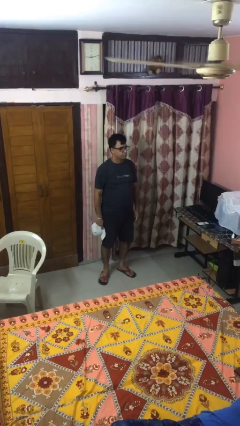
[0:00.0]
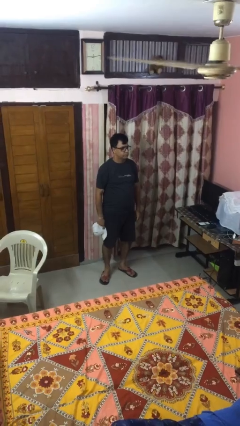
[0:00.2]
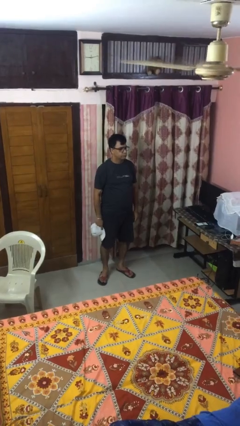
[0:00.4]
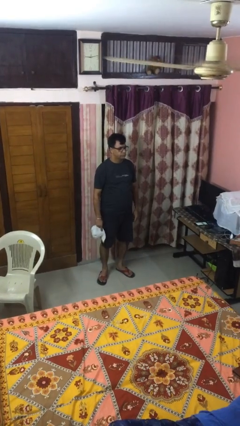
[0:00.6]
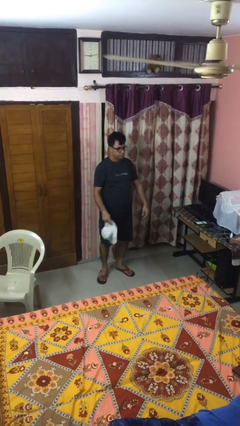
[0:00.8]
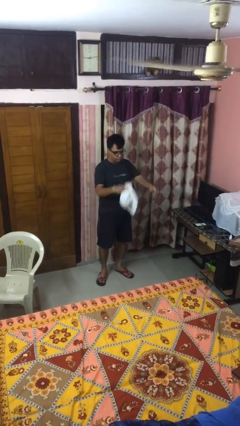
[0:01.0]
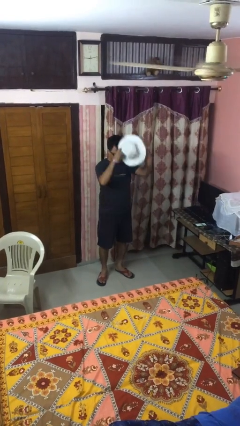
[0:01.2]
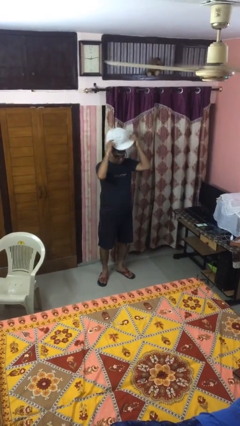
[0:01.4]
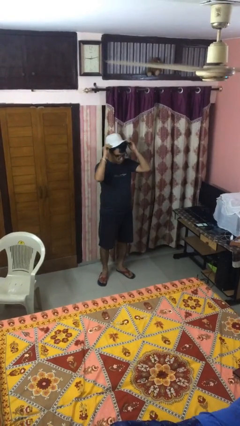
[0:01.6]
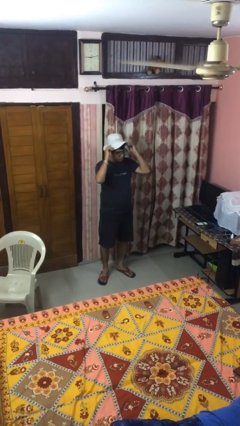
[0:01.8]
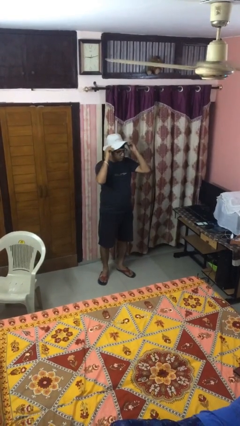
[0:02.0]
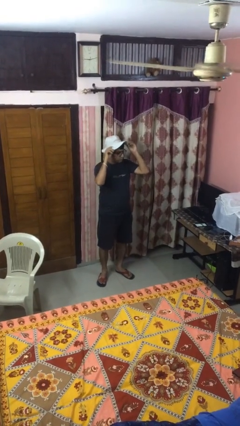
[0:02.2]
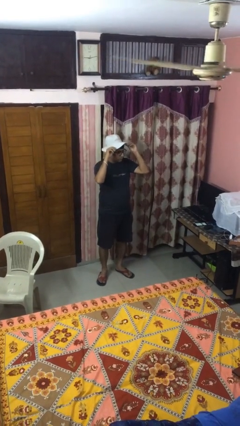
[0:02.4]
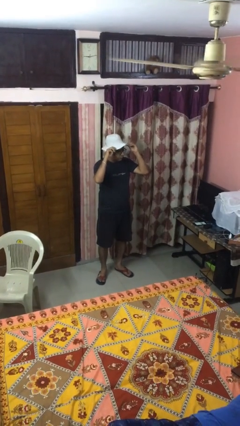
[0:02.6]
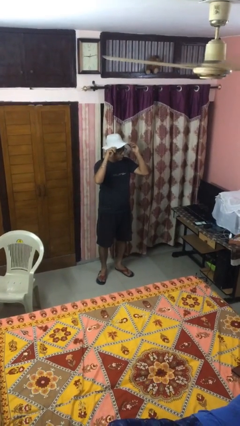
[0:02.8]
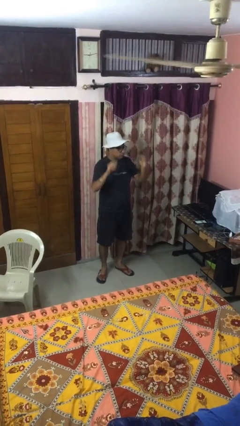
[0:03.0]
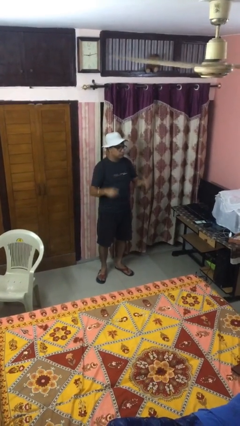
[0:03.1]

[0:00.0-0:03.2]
person puts on hat

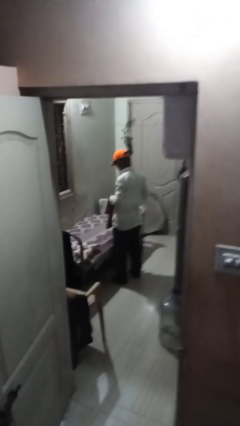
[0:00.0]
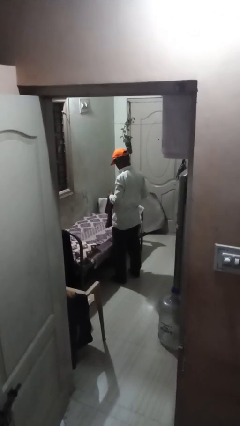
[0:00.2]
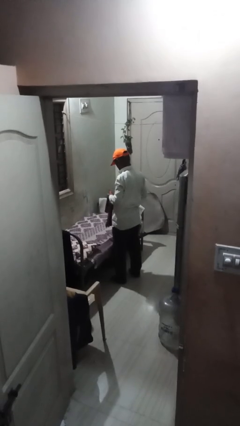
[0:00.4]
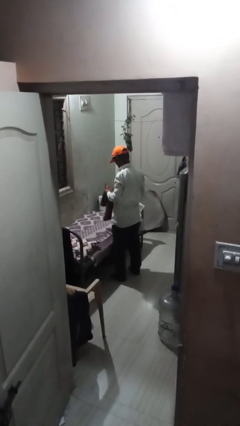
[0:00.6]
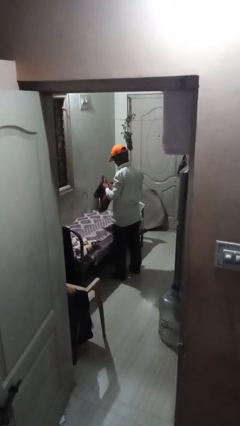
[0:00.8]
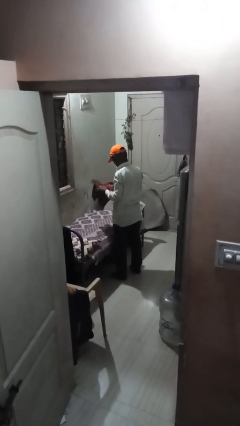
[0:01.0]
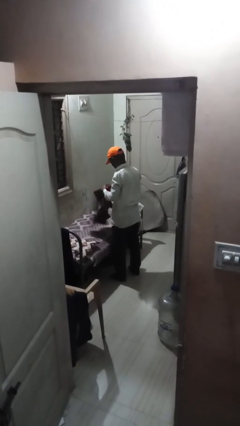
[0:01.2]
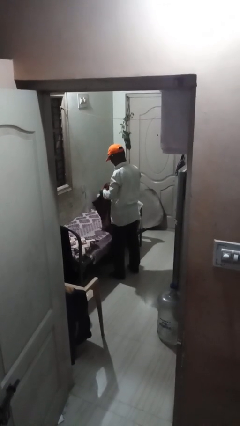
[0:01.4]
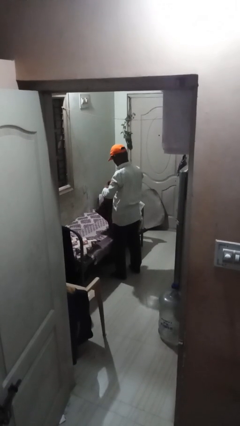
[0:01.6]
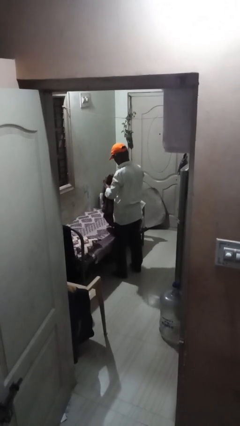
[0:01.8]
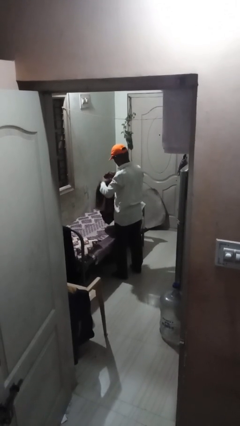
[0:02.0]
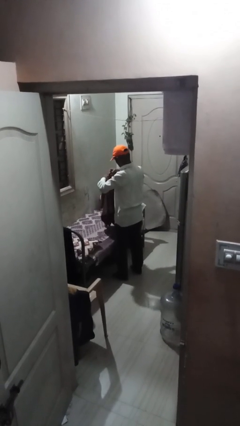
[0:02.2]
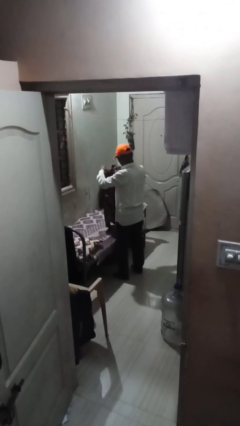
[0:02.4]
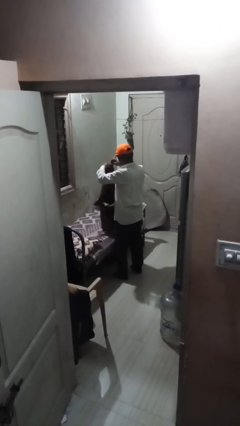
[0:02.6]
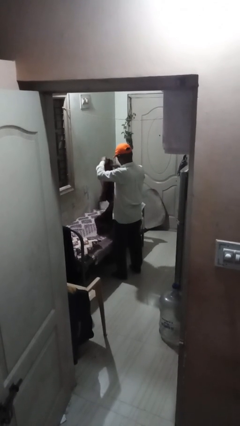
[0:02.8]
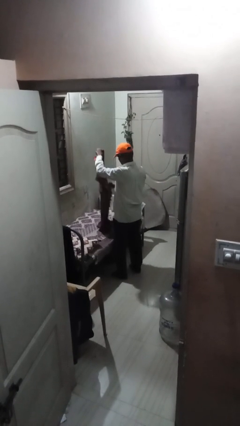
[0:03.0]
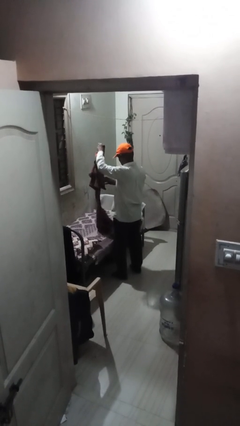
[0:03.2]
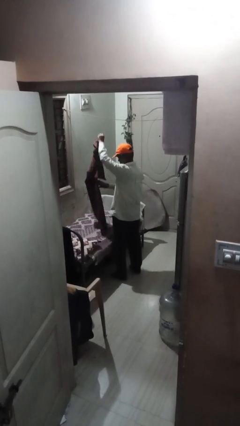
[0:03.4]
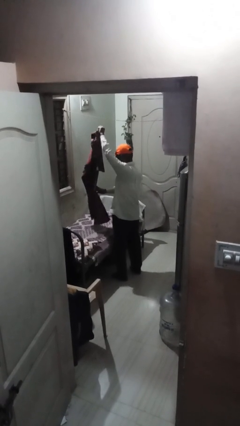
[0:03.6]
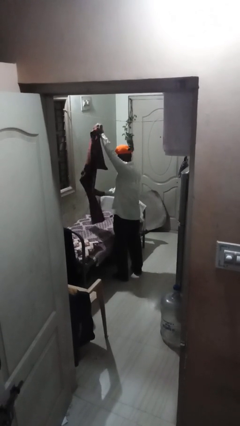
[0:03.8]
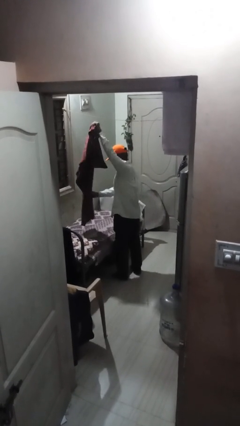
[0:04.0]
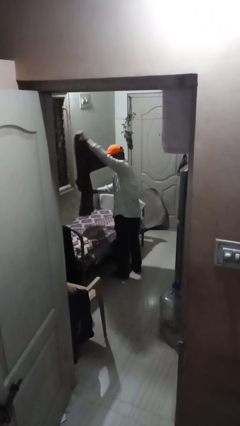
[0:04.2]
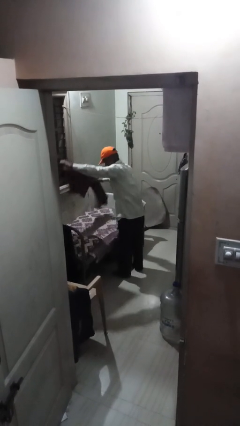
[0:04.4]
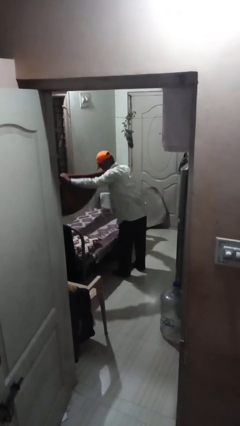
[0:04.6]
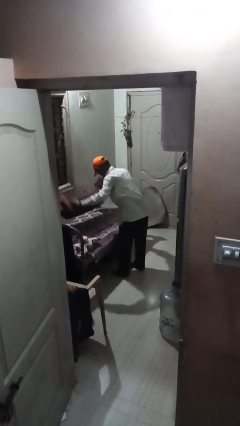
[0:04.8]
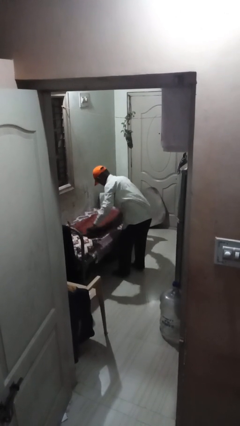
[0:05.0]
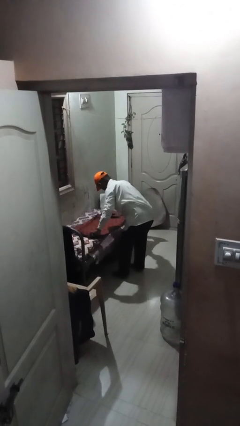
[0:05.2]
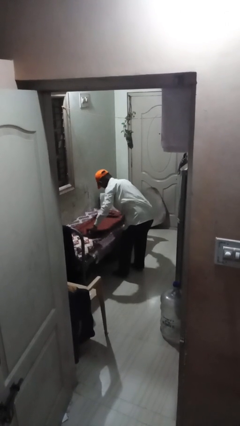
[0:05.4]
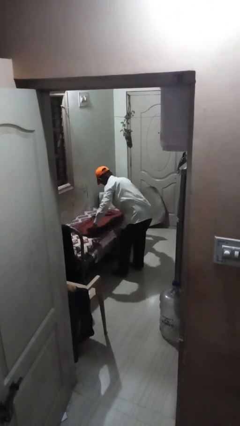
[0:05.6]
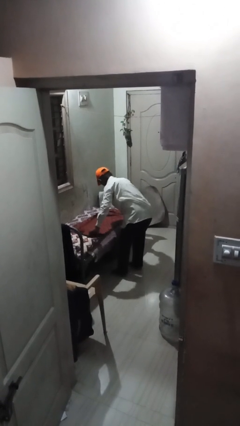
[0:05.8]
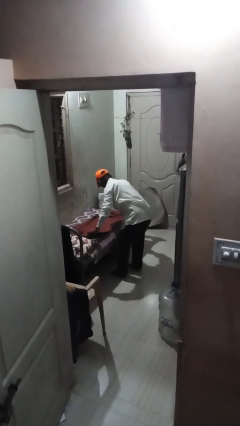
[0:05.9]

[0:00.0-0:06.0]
person unfolds blanket

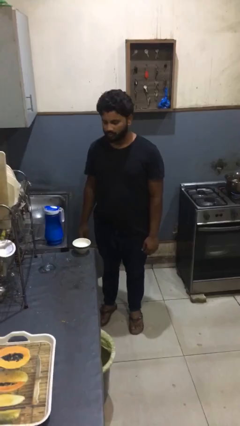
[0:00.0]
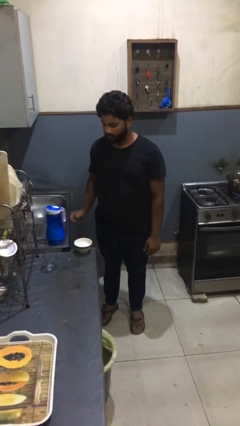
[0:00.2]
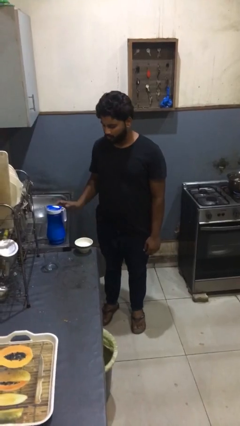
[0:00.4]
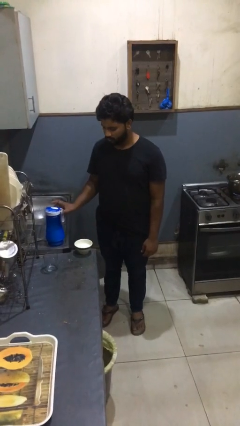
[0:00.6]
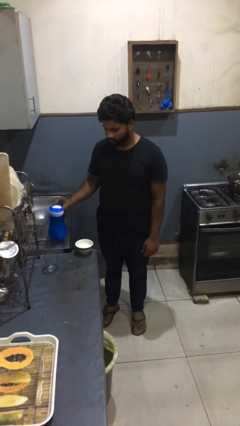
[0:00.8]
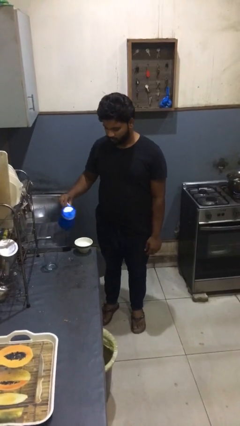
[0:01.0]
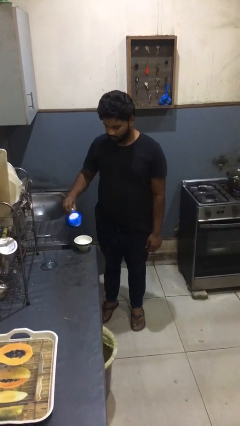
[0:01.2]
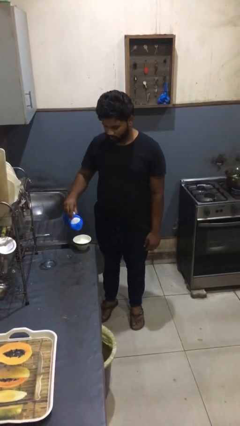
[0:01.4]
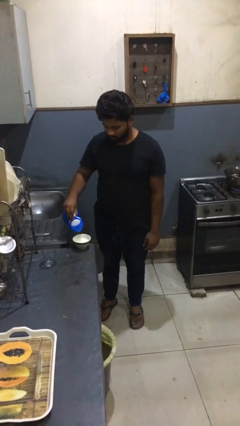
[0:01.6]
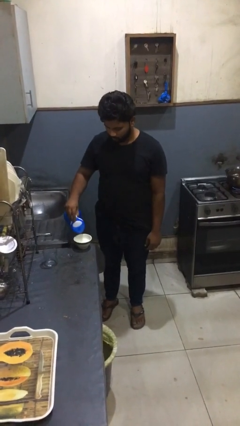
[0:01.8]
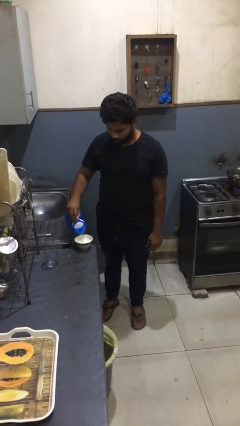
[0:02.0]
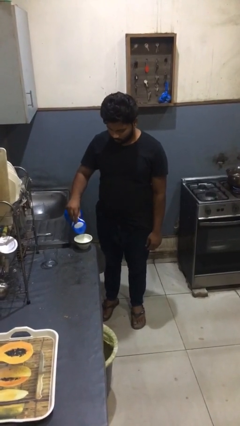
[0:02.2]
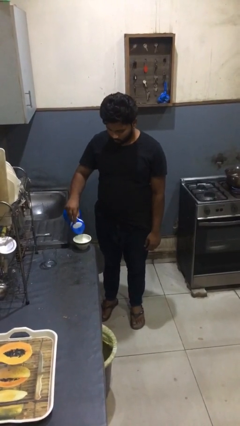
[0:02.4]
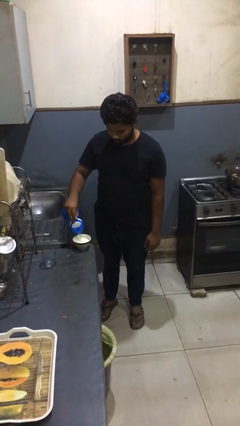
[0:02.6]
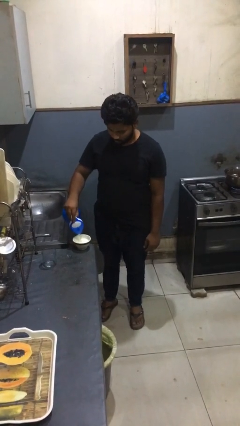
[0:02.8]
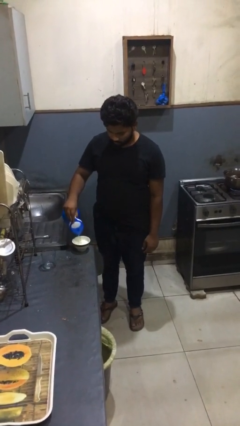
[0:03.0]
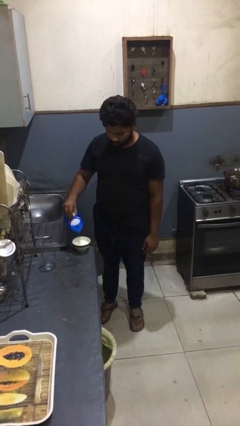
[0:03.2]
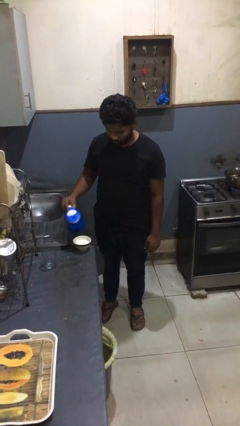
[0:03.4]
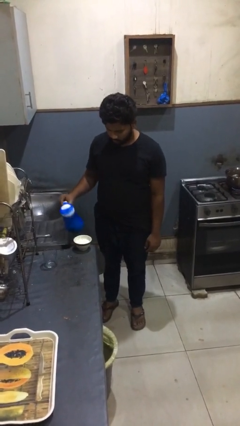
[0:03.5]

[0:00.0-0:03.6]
person pours into bowl

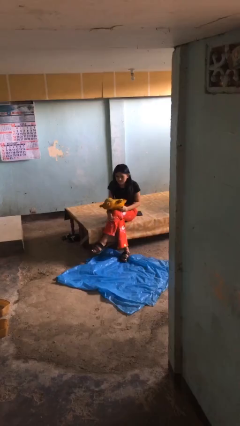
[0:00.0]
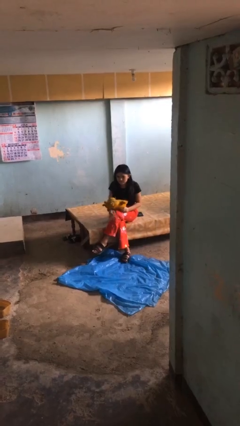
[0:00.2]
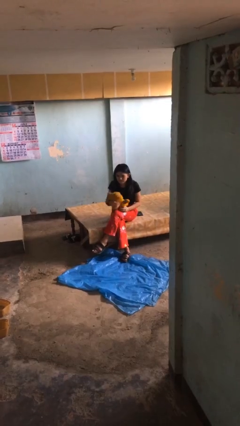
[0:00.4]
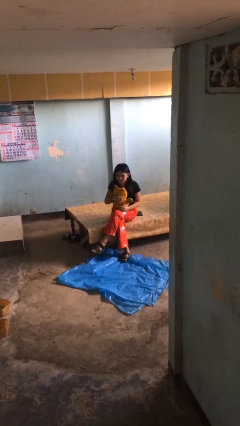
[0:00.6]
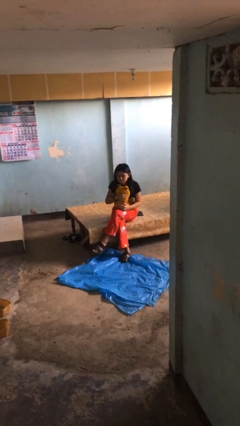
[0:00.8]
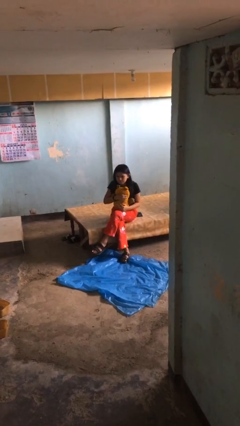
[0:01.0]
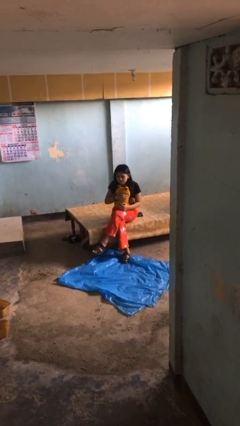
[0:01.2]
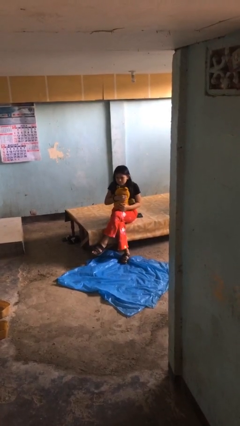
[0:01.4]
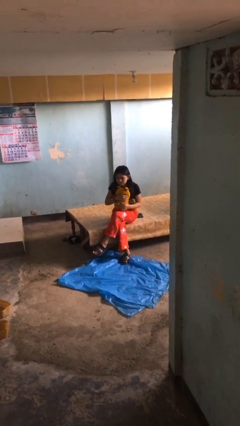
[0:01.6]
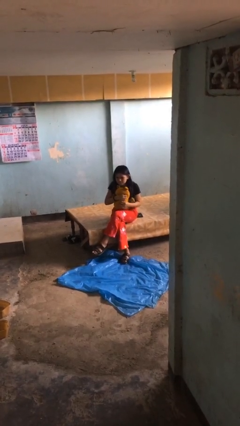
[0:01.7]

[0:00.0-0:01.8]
person hugs stuffed animal

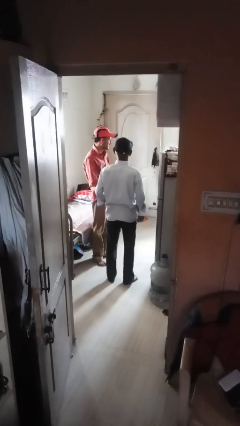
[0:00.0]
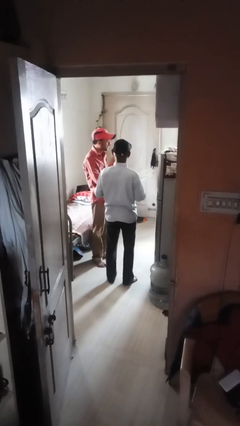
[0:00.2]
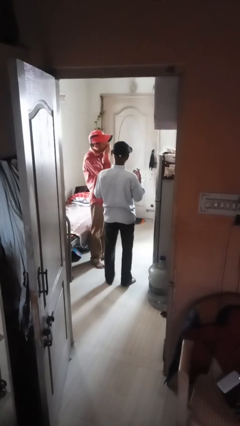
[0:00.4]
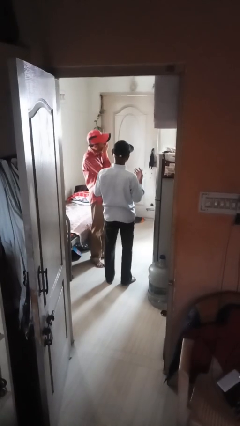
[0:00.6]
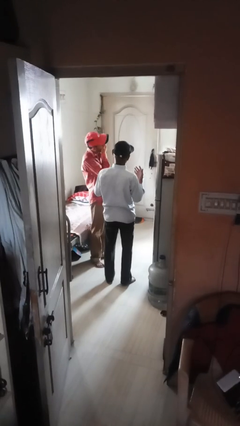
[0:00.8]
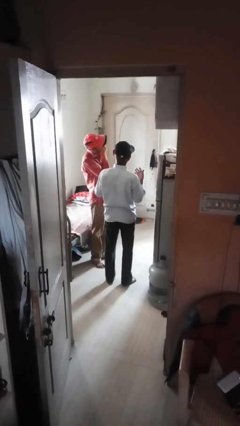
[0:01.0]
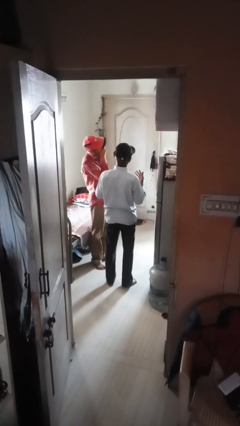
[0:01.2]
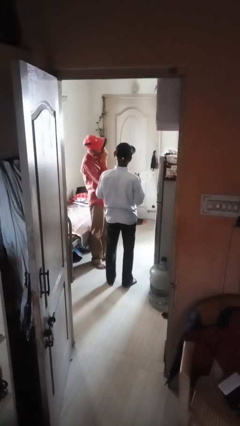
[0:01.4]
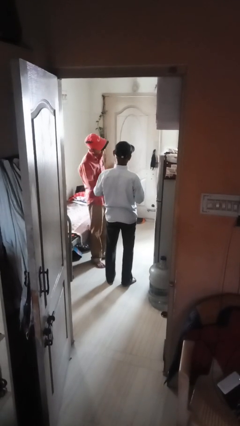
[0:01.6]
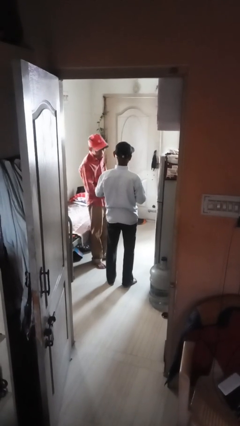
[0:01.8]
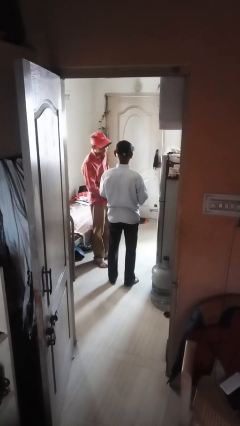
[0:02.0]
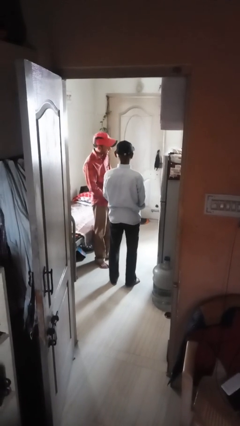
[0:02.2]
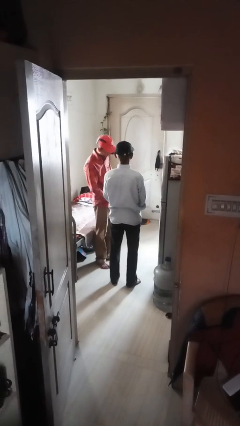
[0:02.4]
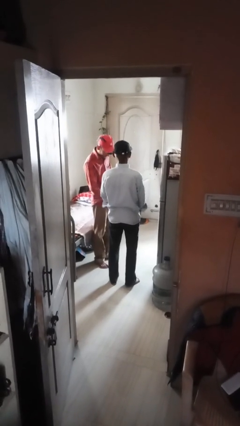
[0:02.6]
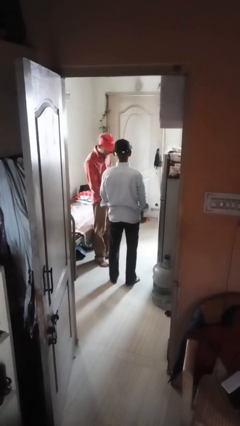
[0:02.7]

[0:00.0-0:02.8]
person laughs with person
